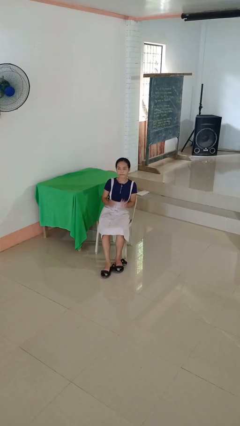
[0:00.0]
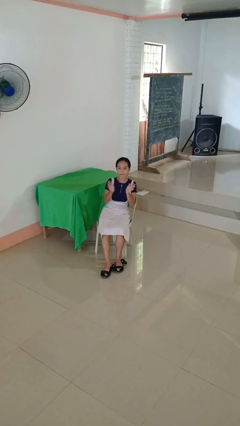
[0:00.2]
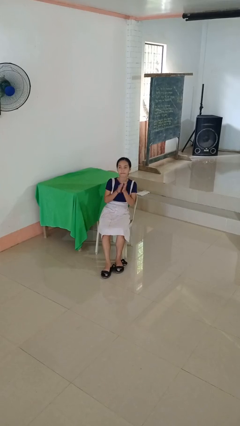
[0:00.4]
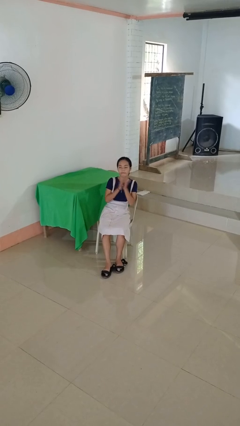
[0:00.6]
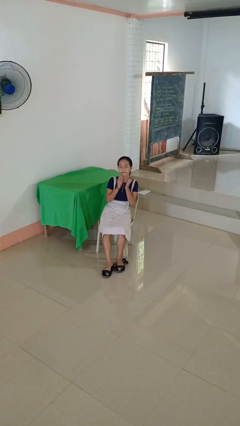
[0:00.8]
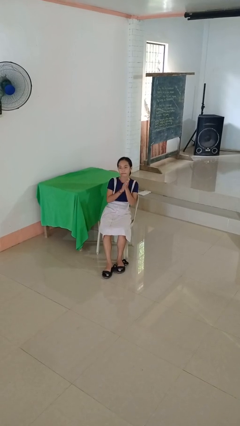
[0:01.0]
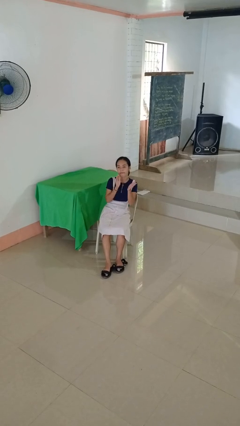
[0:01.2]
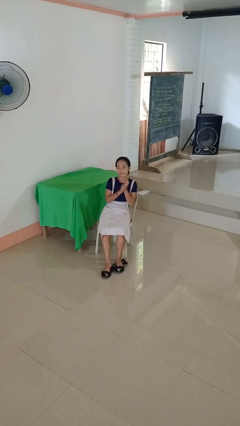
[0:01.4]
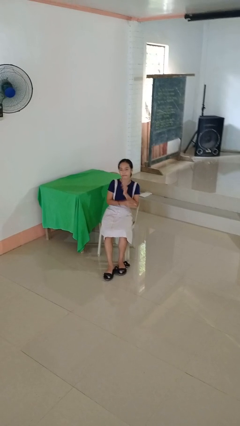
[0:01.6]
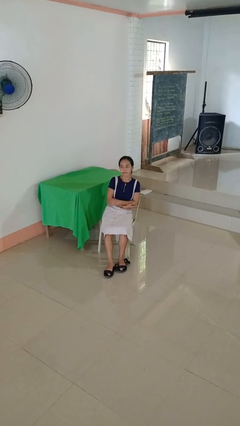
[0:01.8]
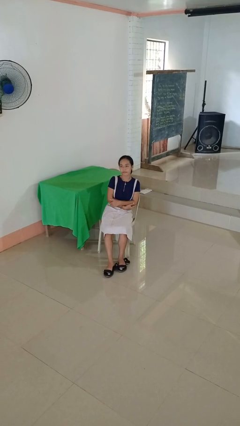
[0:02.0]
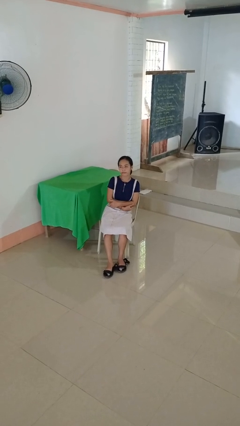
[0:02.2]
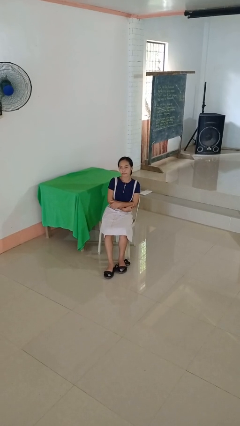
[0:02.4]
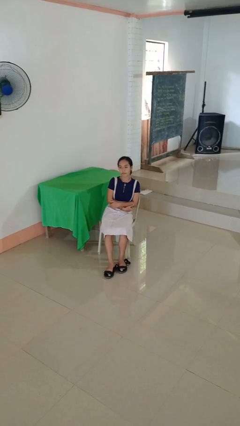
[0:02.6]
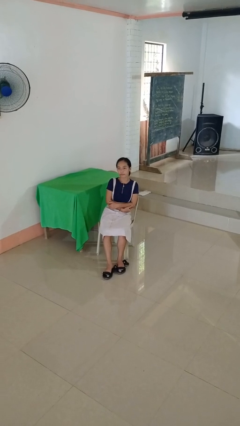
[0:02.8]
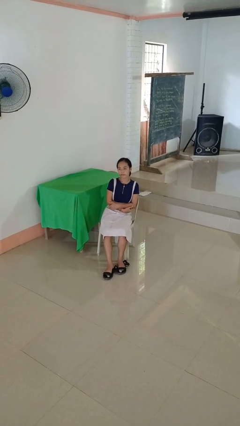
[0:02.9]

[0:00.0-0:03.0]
person claps hands

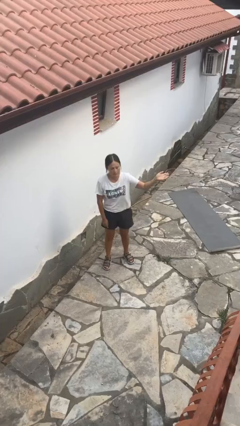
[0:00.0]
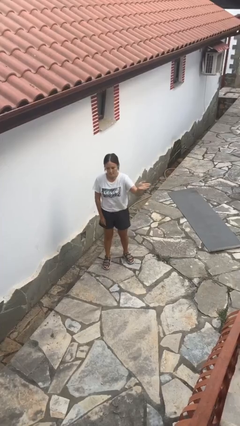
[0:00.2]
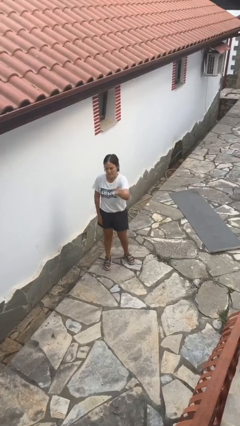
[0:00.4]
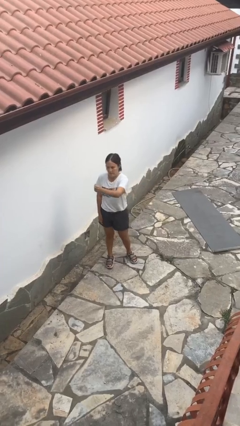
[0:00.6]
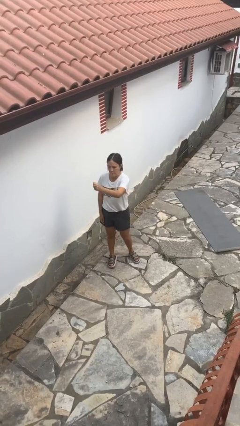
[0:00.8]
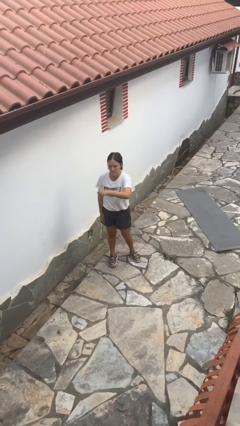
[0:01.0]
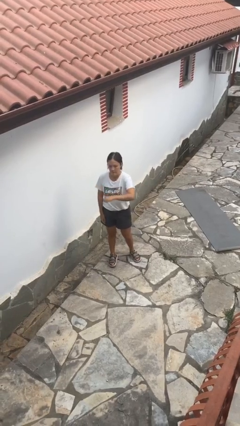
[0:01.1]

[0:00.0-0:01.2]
person gestures swipe right

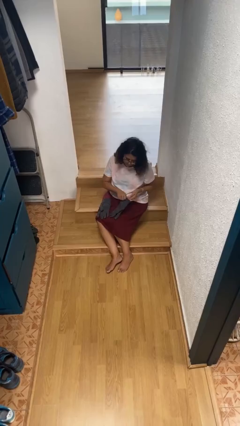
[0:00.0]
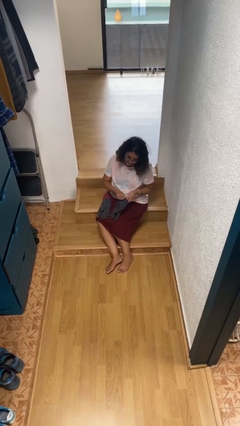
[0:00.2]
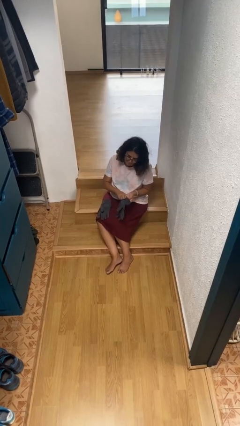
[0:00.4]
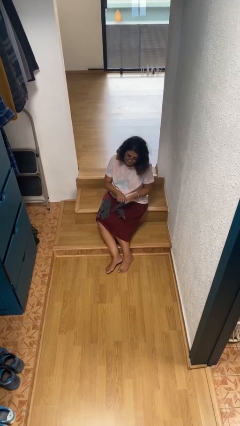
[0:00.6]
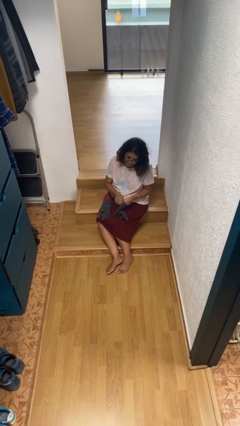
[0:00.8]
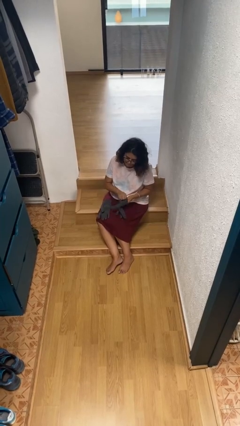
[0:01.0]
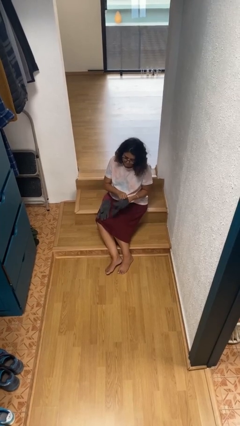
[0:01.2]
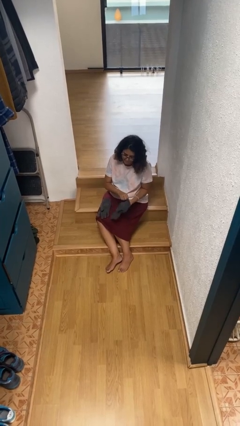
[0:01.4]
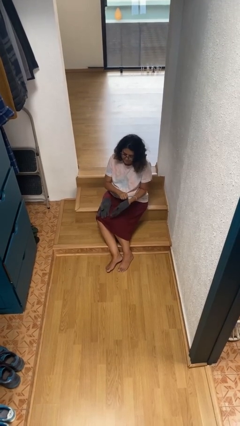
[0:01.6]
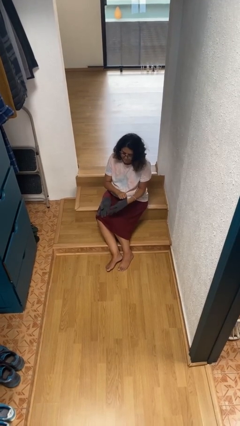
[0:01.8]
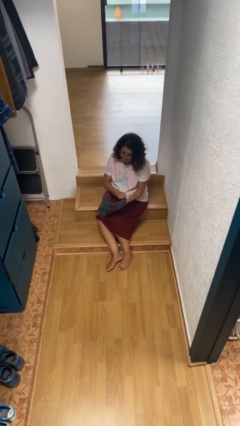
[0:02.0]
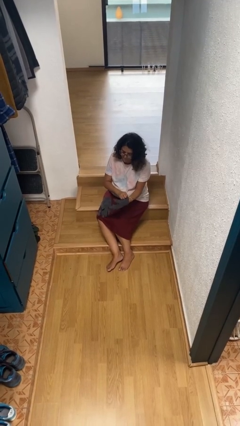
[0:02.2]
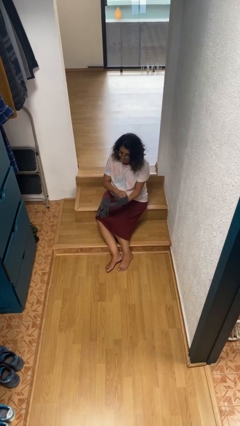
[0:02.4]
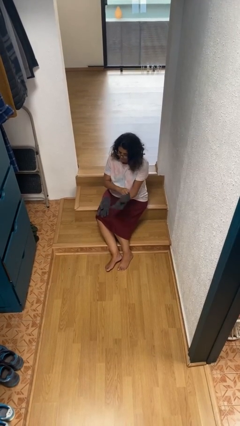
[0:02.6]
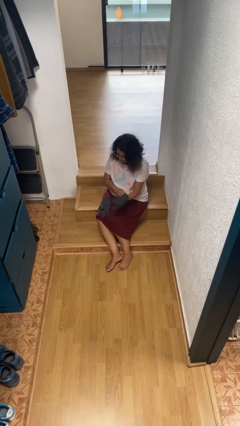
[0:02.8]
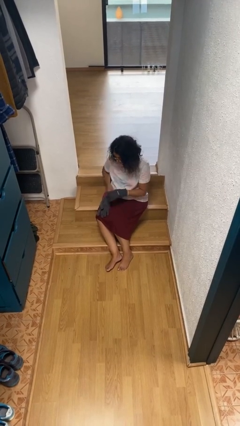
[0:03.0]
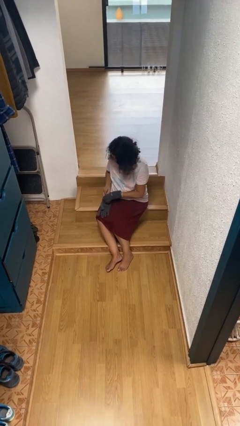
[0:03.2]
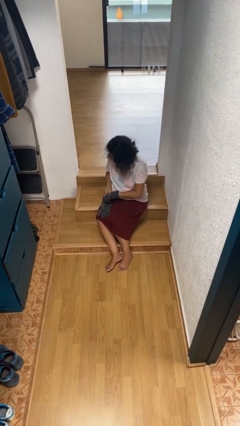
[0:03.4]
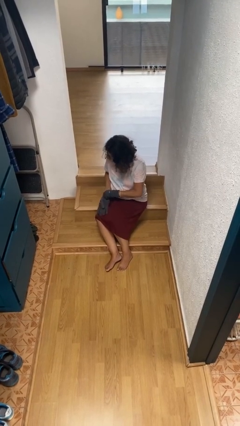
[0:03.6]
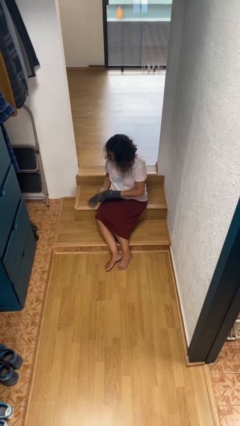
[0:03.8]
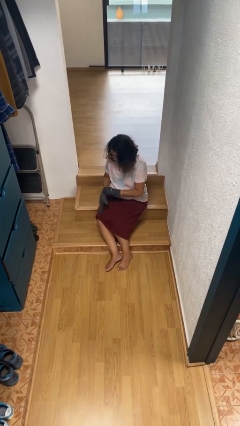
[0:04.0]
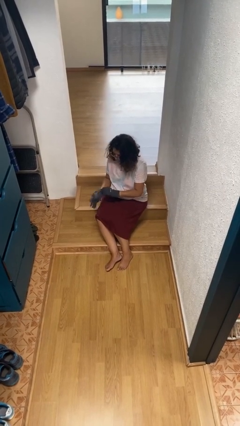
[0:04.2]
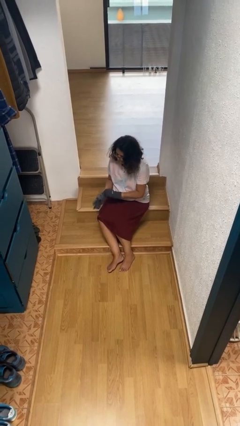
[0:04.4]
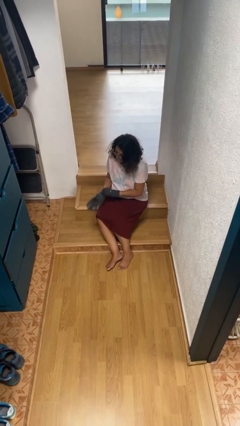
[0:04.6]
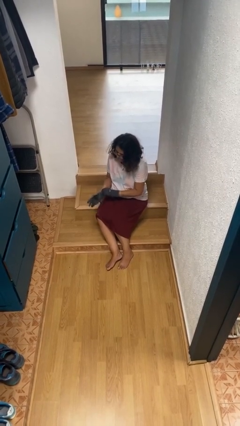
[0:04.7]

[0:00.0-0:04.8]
person puts on gloves

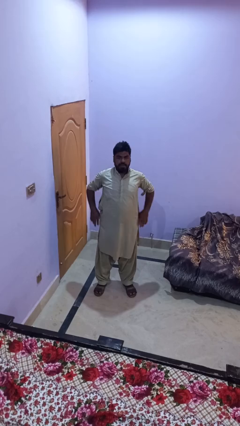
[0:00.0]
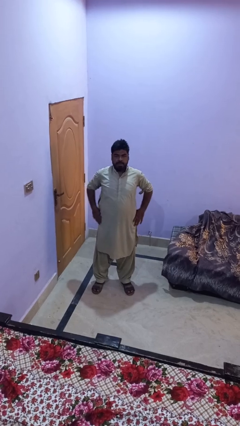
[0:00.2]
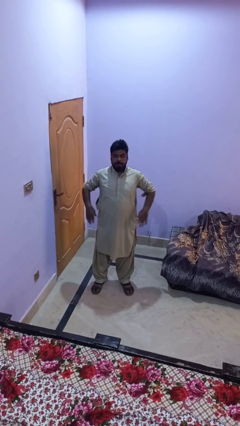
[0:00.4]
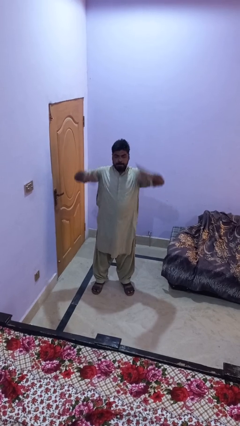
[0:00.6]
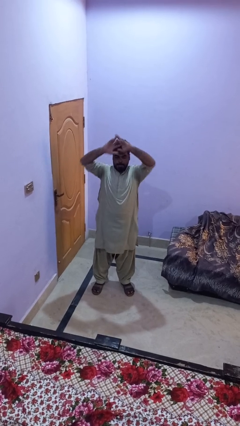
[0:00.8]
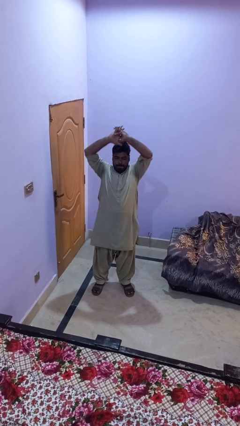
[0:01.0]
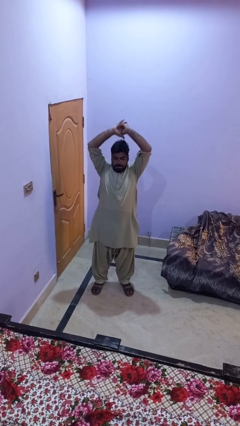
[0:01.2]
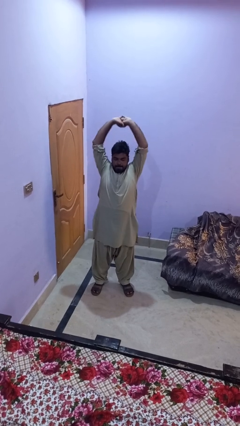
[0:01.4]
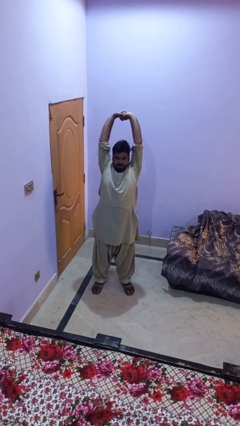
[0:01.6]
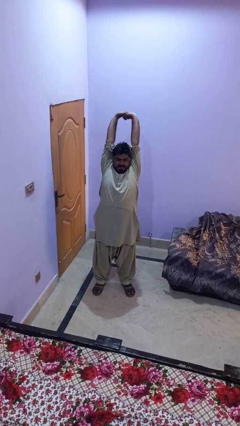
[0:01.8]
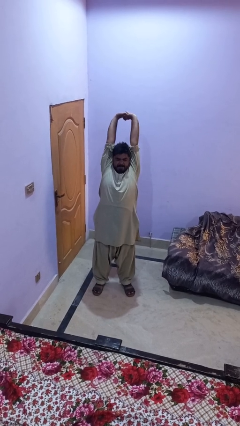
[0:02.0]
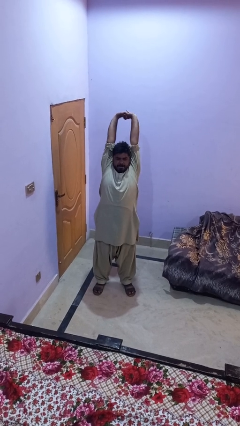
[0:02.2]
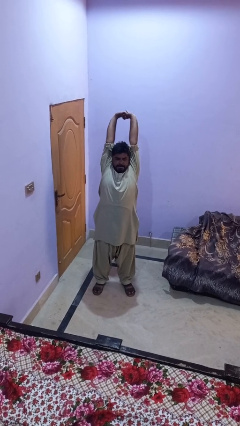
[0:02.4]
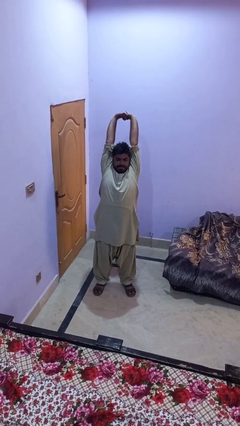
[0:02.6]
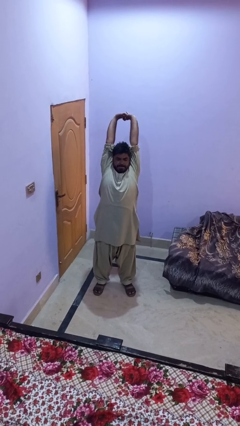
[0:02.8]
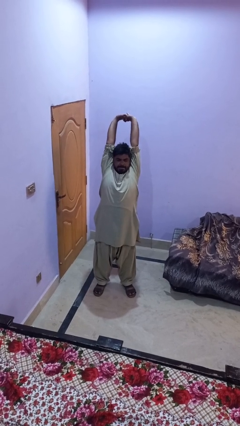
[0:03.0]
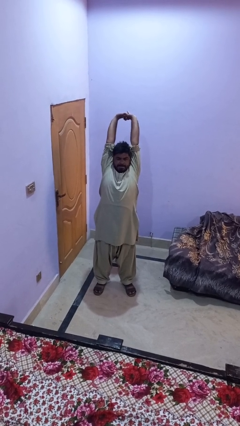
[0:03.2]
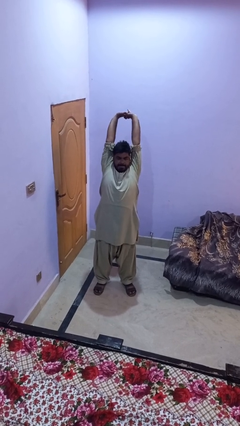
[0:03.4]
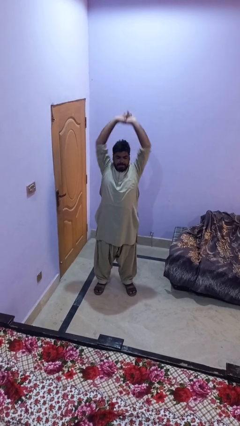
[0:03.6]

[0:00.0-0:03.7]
person stretches arms over head

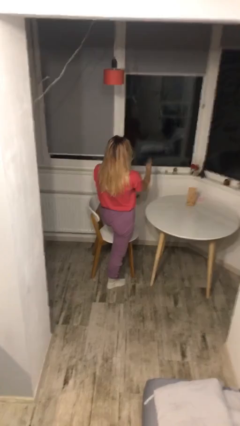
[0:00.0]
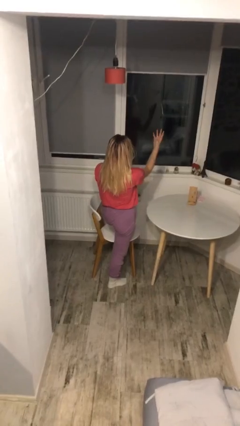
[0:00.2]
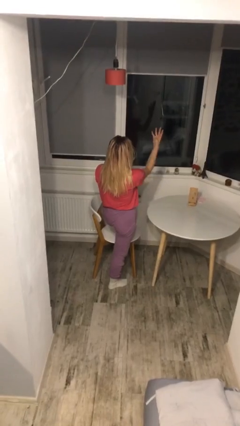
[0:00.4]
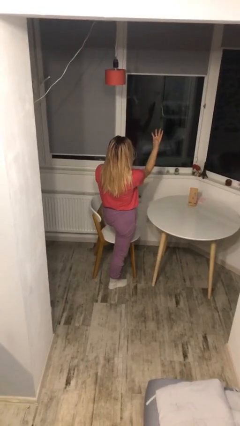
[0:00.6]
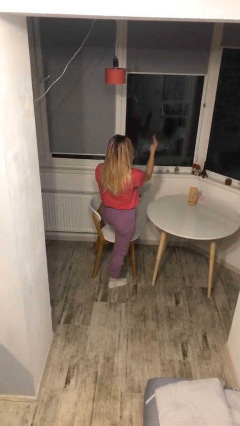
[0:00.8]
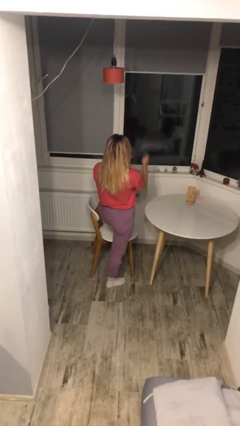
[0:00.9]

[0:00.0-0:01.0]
person gestures number four

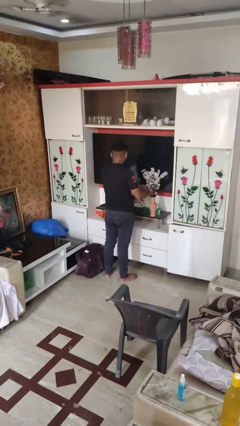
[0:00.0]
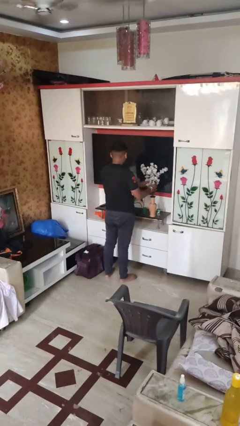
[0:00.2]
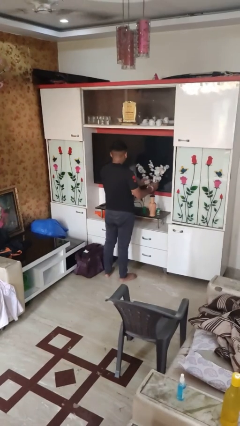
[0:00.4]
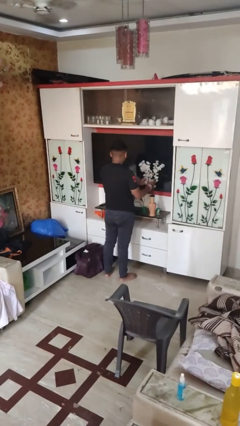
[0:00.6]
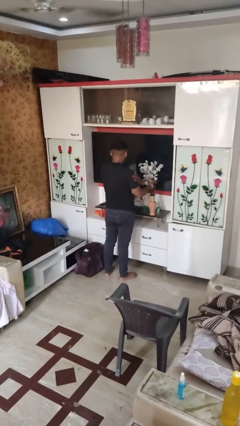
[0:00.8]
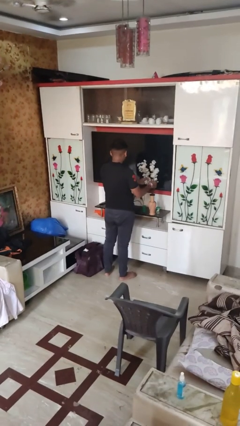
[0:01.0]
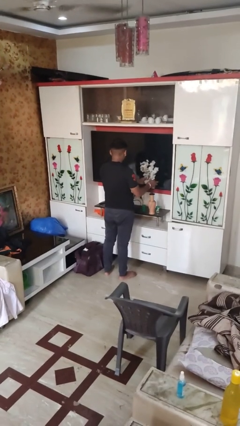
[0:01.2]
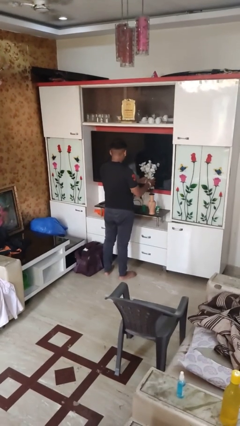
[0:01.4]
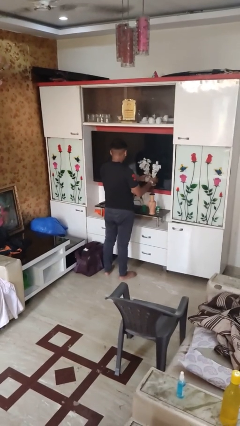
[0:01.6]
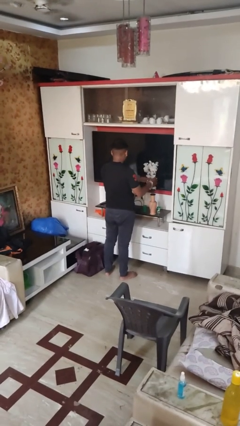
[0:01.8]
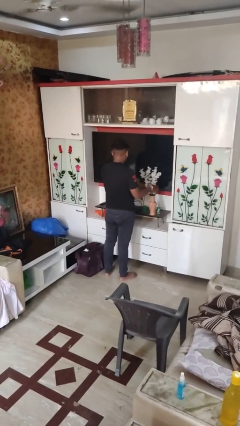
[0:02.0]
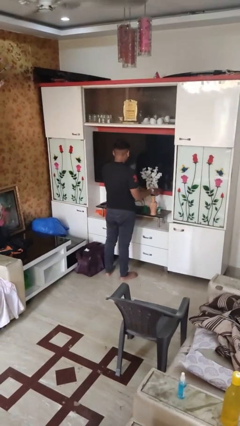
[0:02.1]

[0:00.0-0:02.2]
person arranges flowers in vase

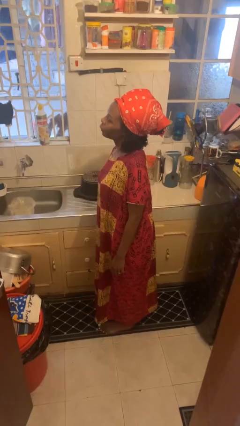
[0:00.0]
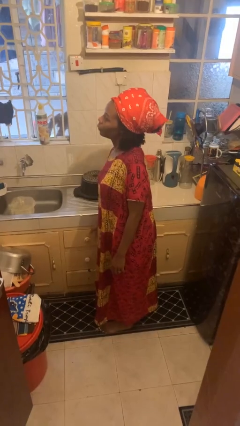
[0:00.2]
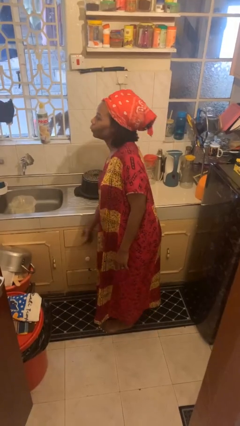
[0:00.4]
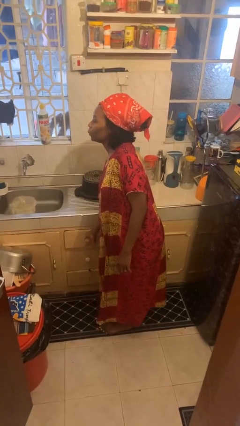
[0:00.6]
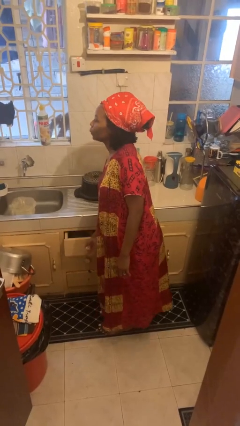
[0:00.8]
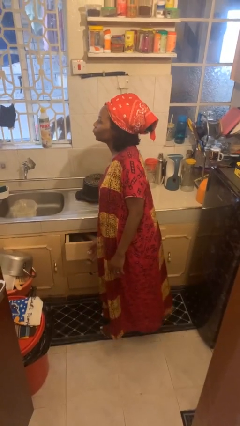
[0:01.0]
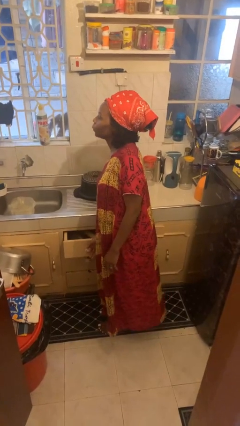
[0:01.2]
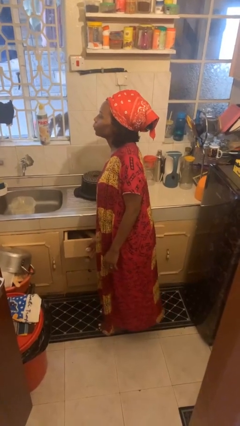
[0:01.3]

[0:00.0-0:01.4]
person opens kitchen drawer
